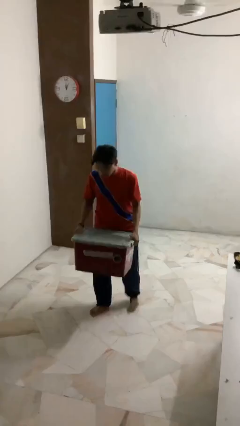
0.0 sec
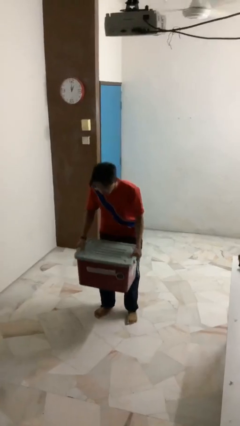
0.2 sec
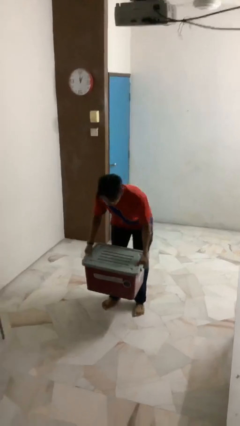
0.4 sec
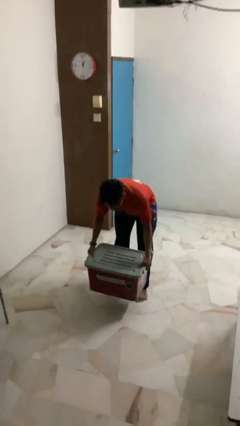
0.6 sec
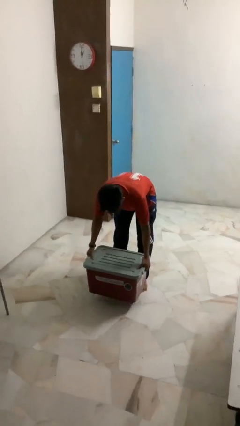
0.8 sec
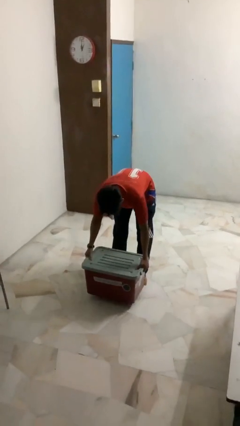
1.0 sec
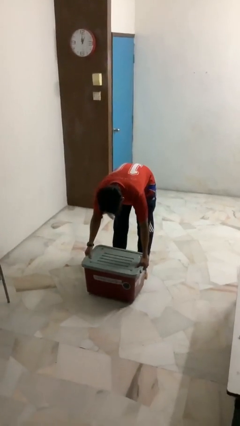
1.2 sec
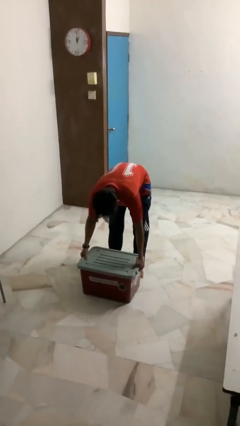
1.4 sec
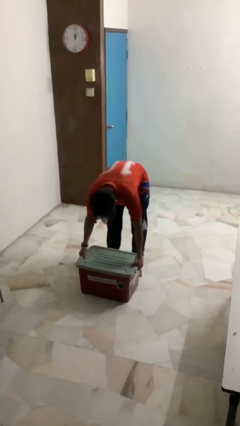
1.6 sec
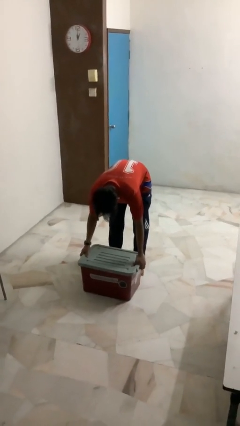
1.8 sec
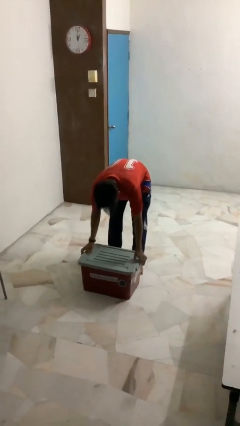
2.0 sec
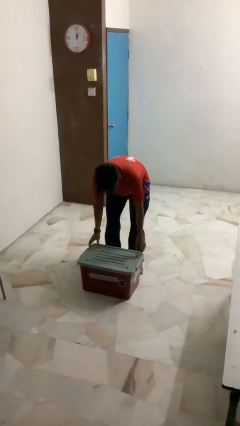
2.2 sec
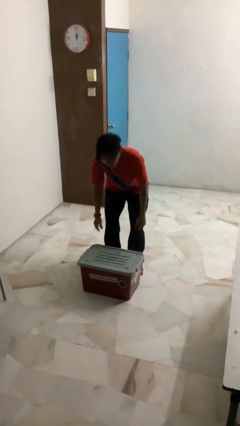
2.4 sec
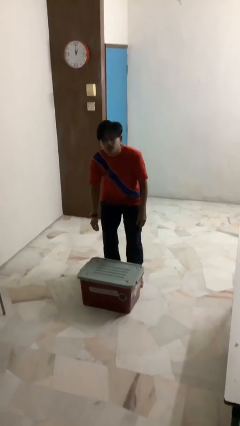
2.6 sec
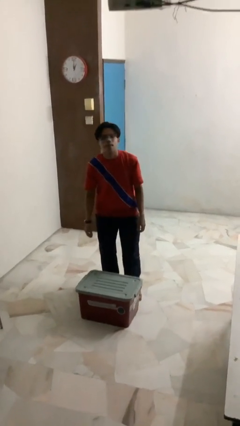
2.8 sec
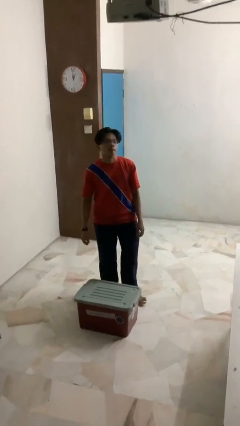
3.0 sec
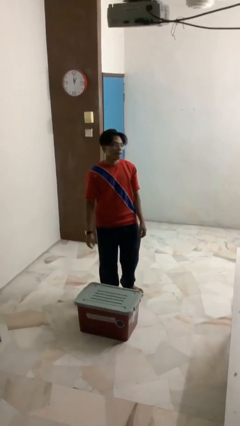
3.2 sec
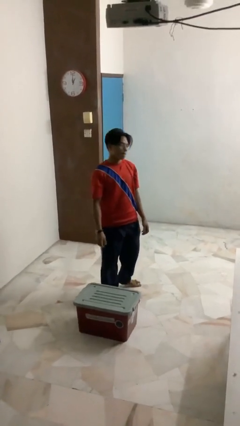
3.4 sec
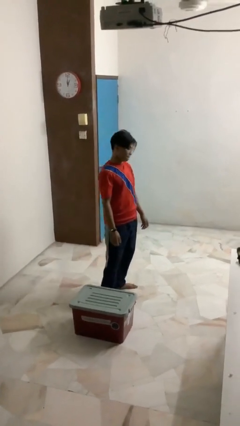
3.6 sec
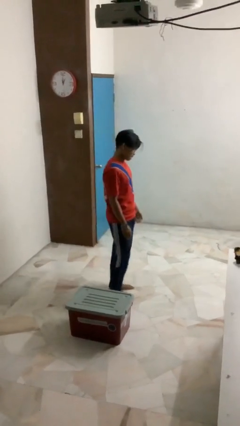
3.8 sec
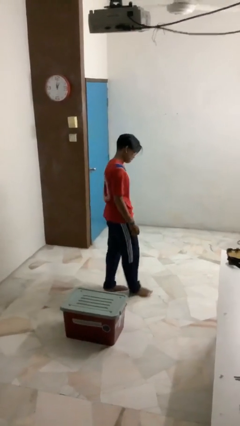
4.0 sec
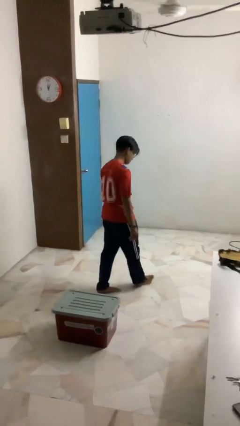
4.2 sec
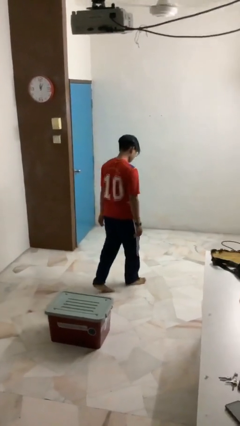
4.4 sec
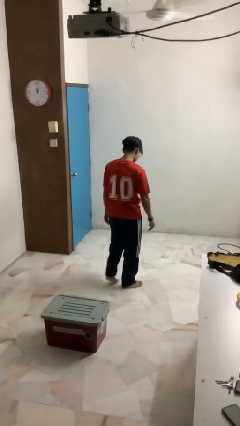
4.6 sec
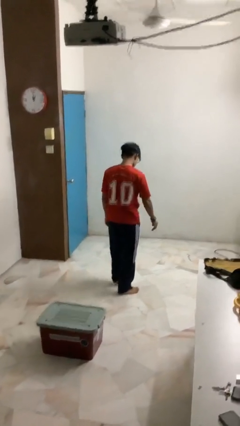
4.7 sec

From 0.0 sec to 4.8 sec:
person puts down object on floor

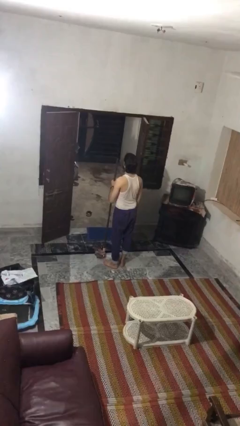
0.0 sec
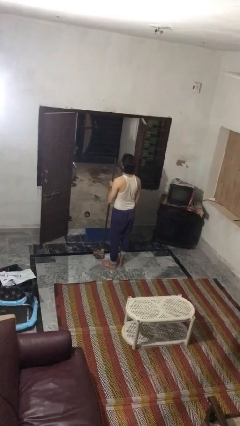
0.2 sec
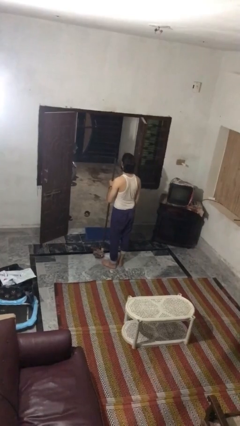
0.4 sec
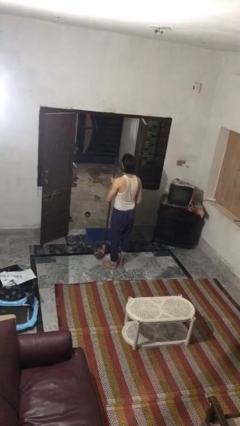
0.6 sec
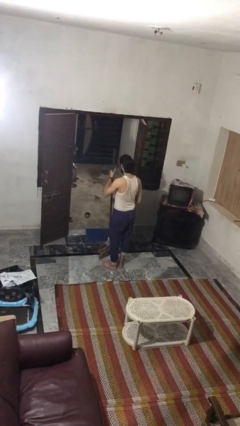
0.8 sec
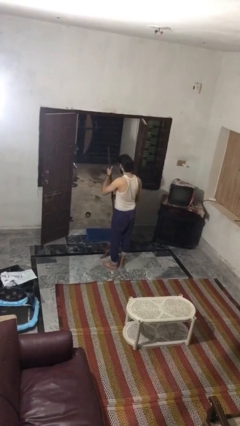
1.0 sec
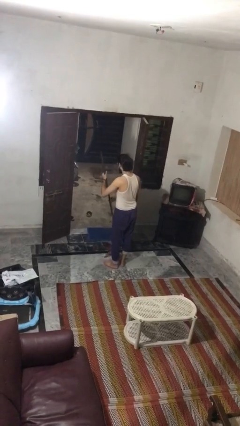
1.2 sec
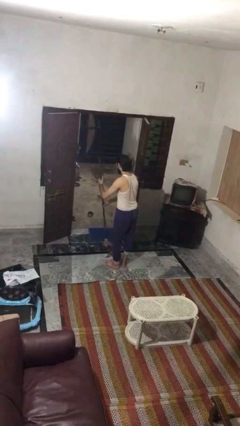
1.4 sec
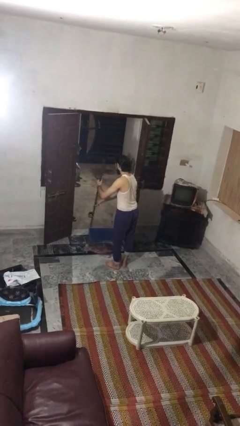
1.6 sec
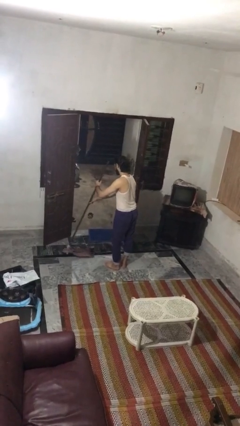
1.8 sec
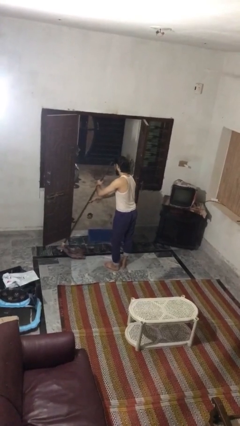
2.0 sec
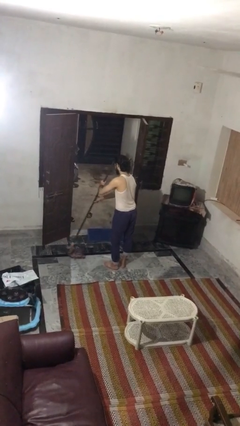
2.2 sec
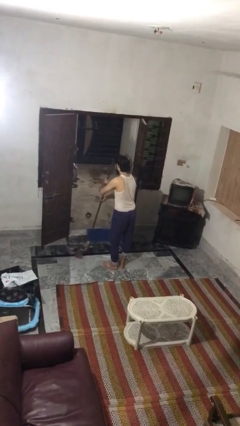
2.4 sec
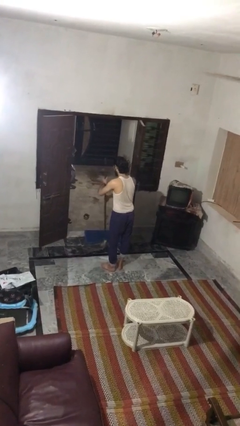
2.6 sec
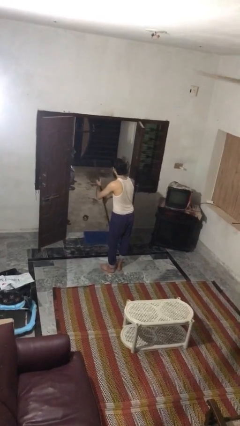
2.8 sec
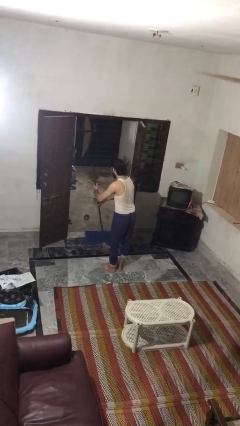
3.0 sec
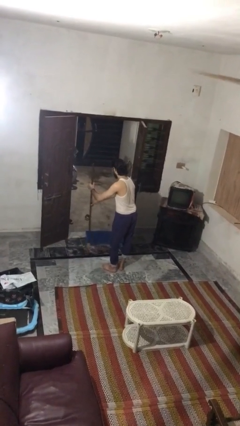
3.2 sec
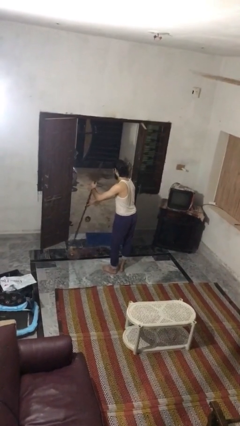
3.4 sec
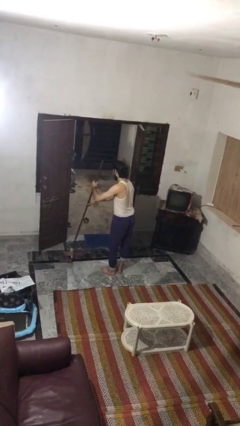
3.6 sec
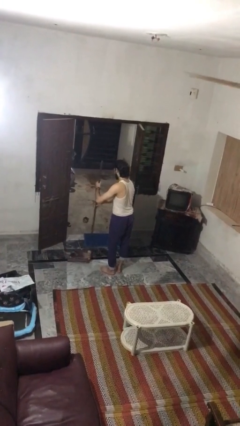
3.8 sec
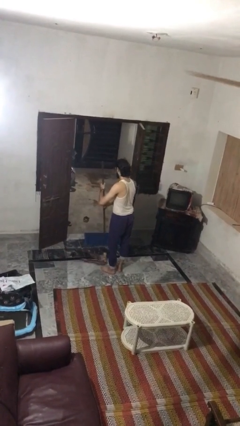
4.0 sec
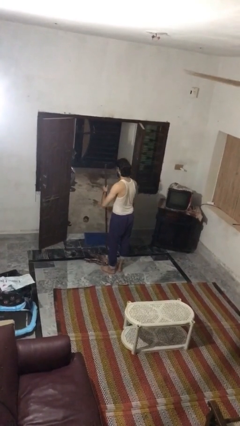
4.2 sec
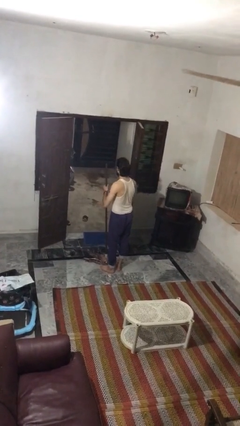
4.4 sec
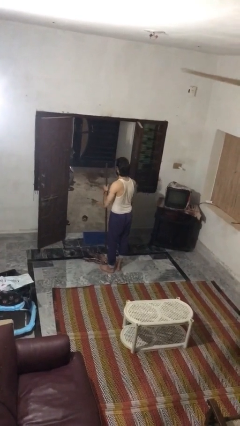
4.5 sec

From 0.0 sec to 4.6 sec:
person mops

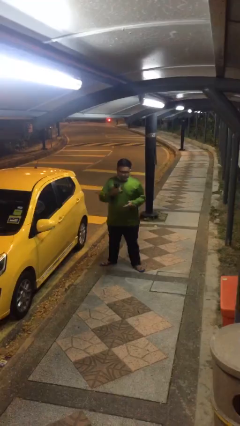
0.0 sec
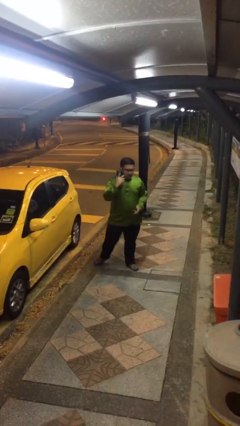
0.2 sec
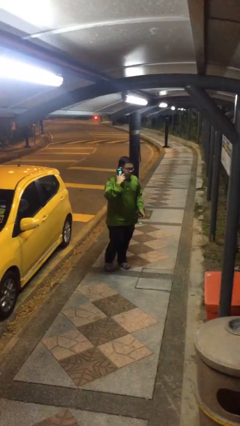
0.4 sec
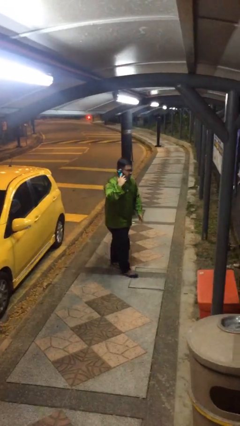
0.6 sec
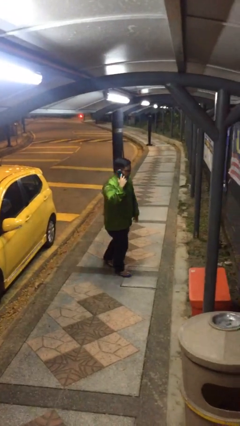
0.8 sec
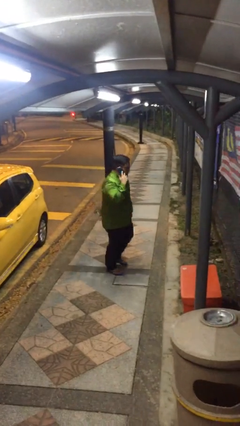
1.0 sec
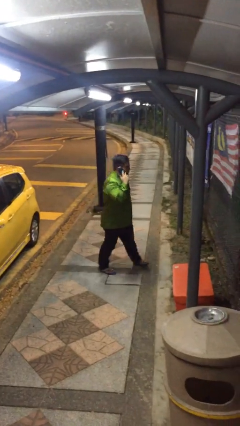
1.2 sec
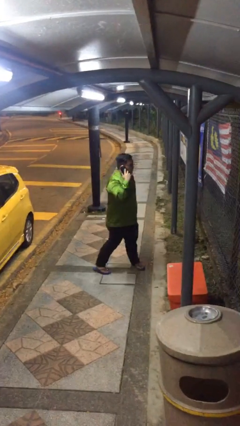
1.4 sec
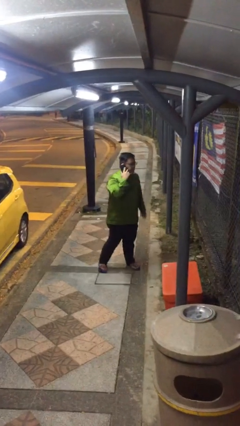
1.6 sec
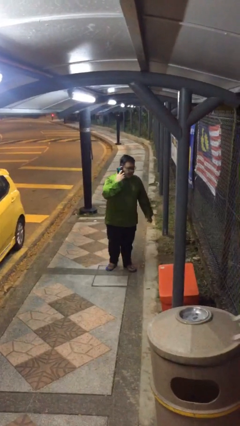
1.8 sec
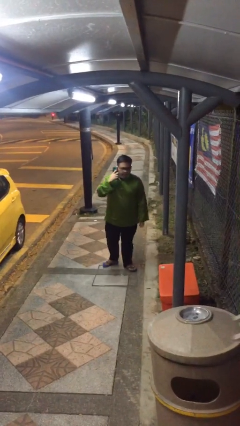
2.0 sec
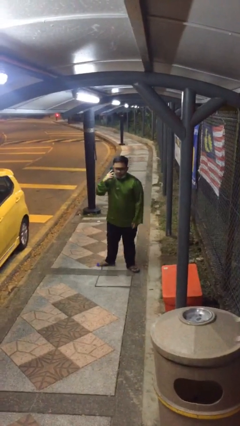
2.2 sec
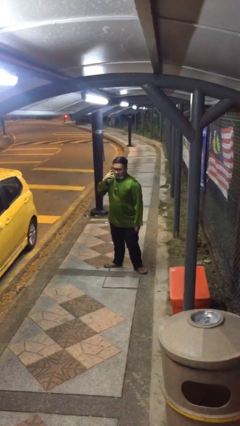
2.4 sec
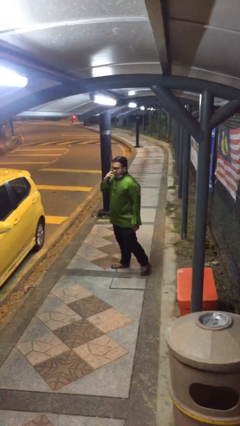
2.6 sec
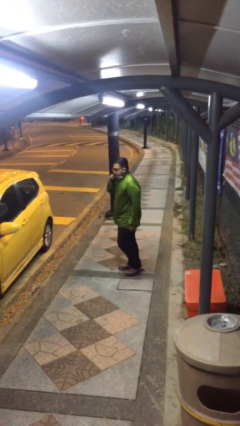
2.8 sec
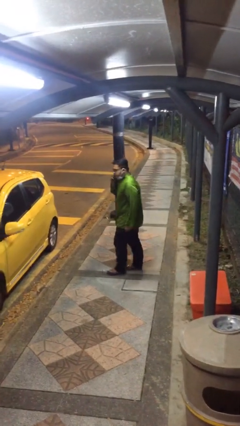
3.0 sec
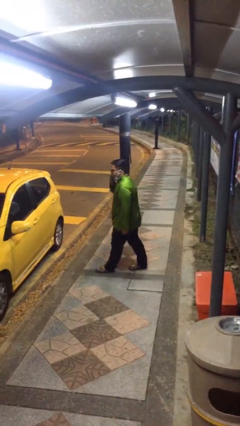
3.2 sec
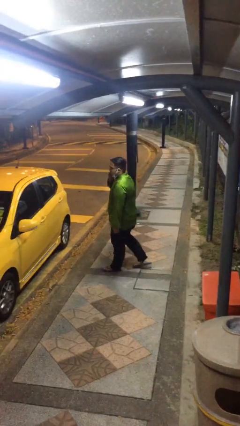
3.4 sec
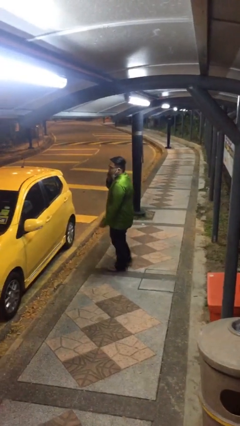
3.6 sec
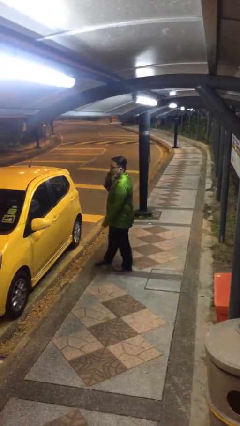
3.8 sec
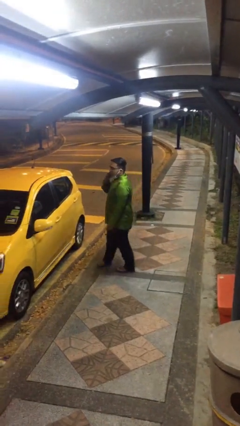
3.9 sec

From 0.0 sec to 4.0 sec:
person talks on phone

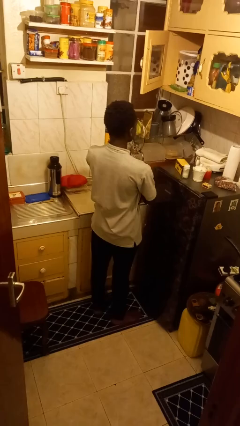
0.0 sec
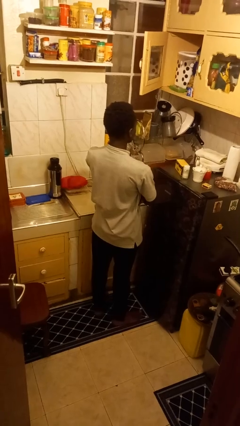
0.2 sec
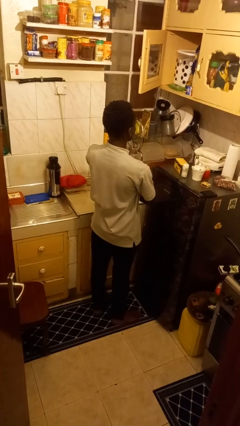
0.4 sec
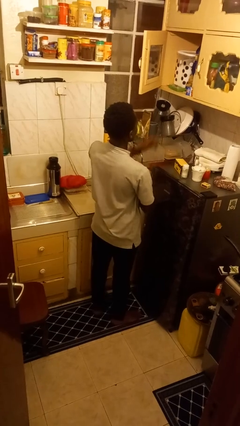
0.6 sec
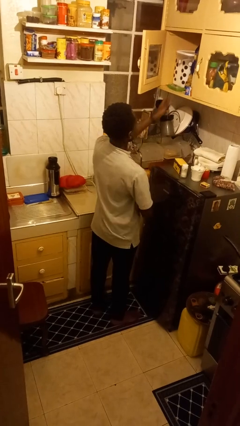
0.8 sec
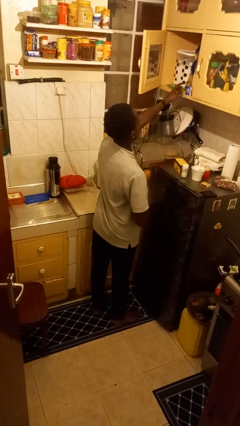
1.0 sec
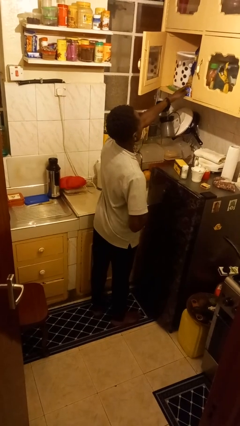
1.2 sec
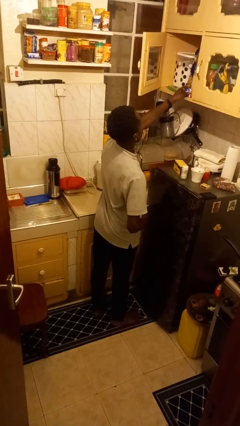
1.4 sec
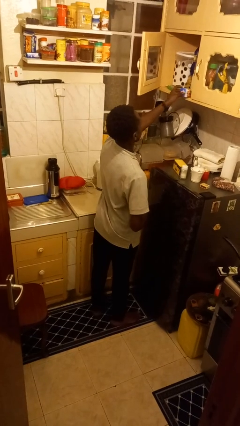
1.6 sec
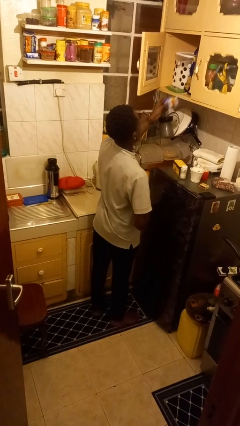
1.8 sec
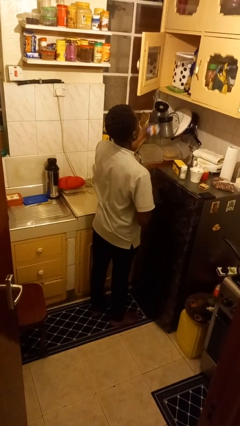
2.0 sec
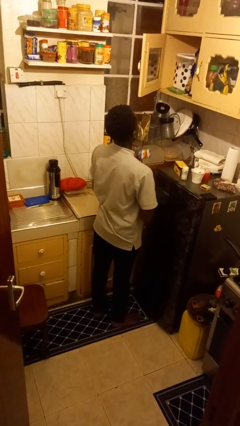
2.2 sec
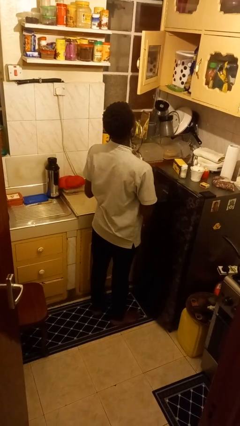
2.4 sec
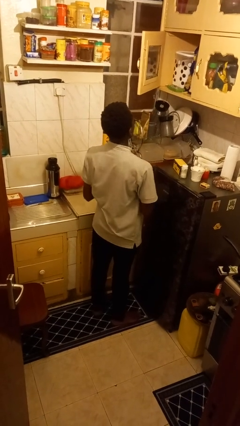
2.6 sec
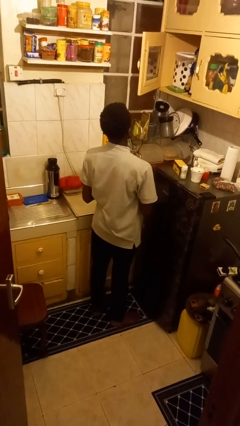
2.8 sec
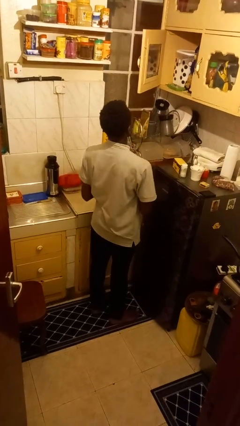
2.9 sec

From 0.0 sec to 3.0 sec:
person picks up object from cabinet

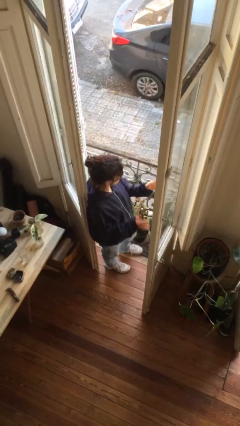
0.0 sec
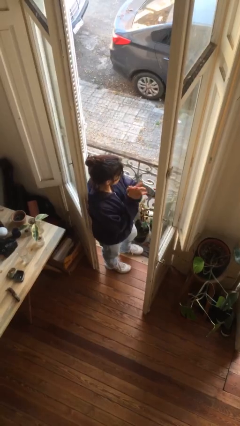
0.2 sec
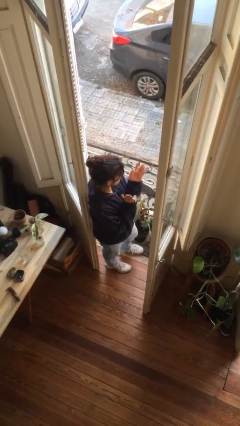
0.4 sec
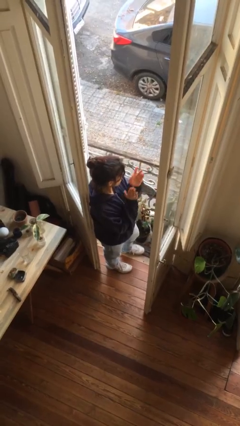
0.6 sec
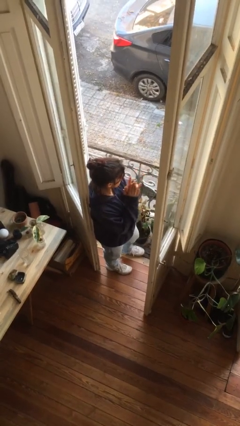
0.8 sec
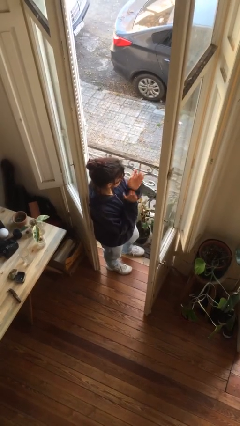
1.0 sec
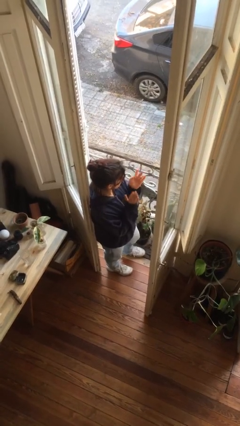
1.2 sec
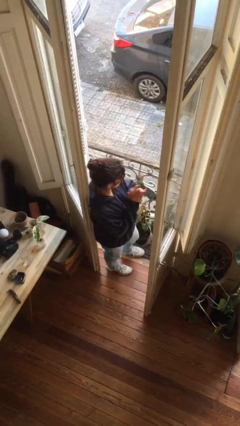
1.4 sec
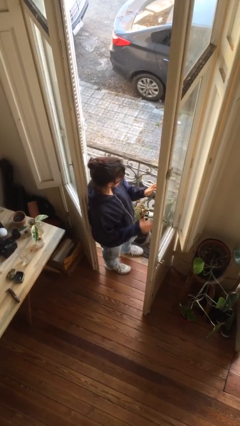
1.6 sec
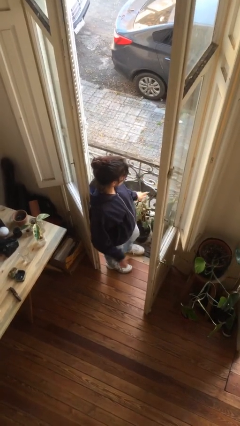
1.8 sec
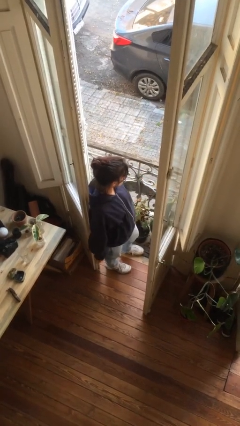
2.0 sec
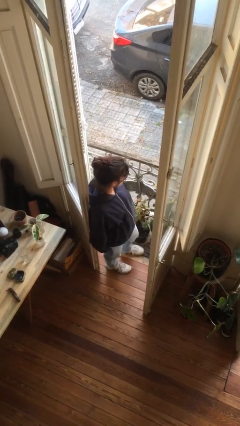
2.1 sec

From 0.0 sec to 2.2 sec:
person claps hands
